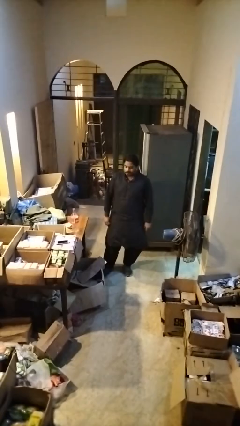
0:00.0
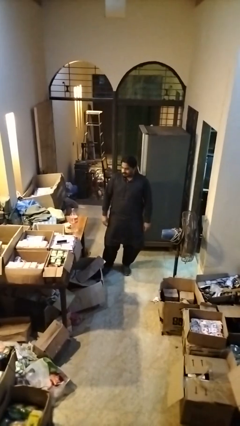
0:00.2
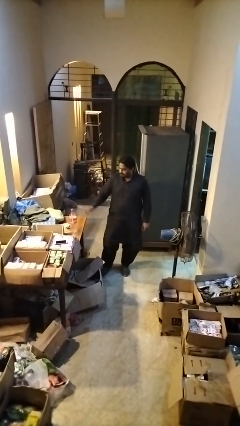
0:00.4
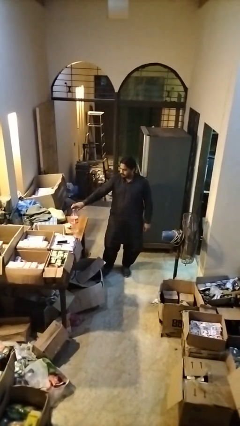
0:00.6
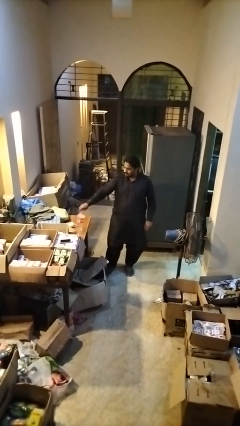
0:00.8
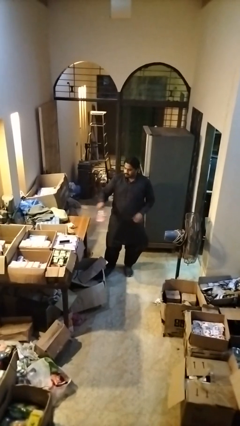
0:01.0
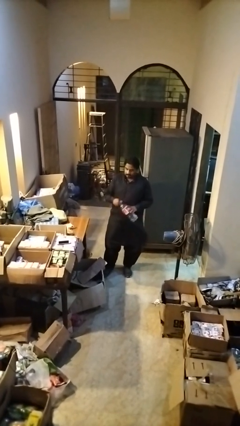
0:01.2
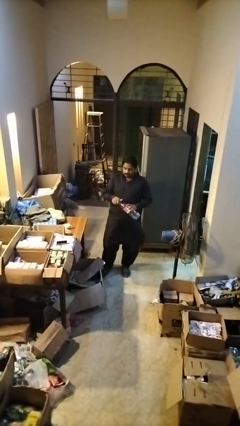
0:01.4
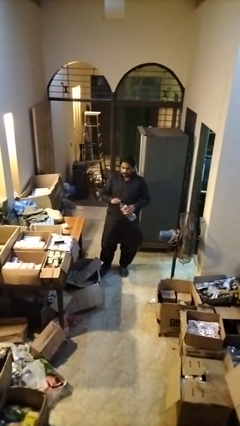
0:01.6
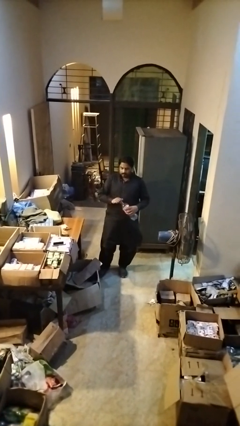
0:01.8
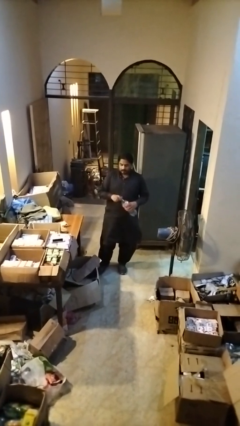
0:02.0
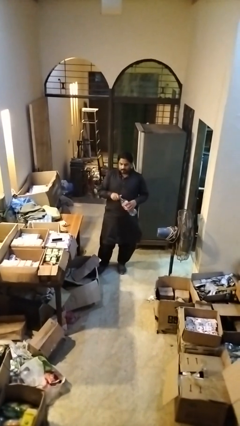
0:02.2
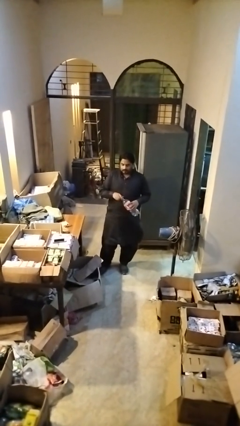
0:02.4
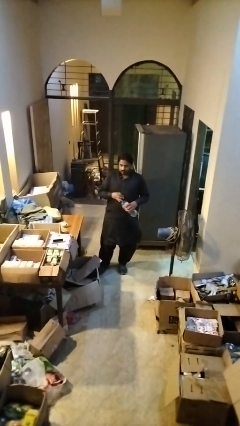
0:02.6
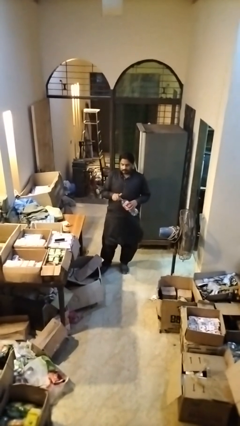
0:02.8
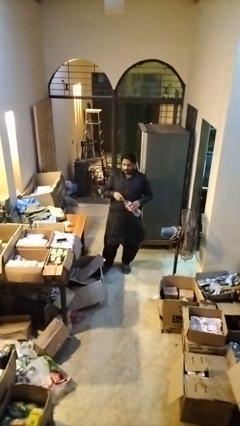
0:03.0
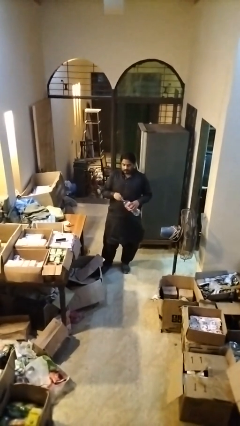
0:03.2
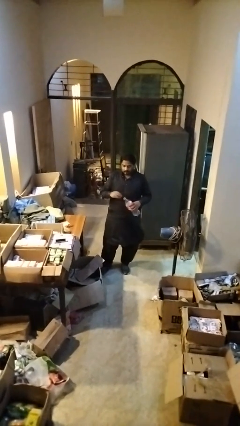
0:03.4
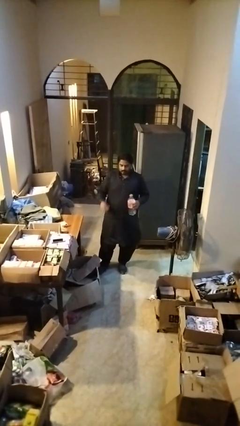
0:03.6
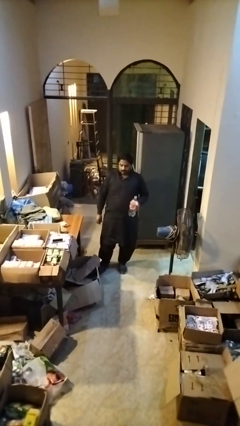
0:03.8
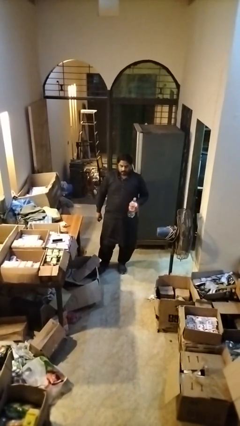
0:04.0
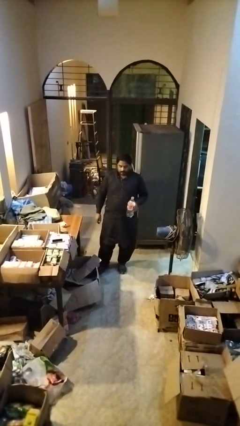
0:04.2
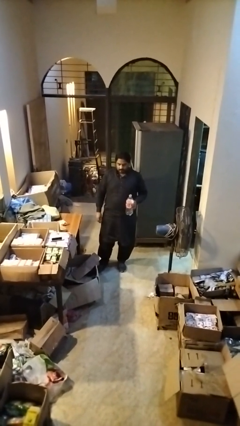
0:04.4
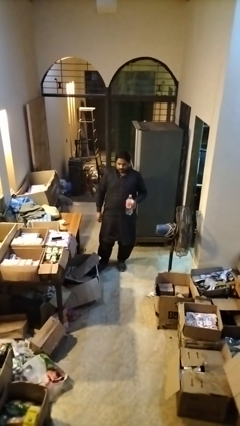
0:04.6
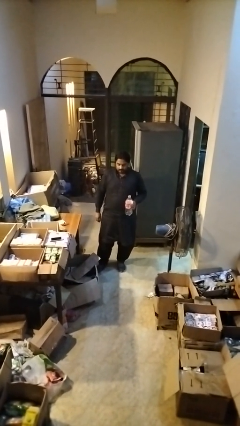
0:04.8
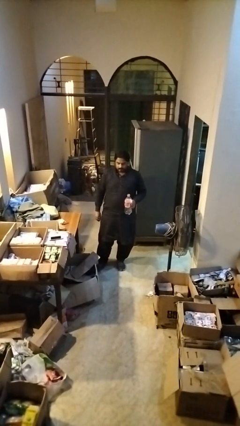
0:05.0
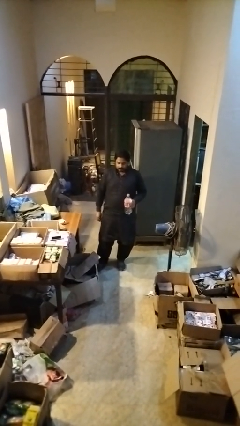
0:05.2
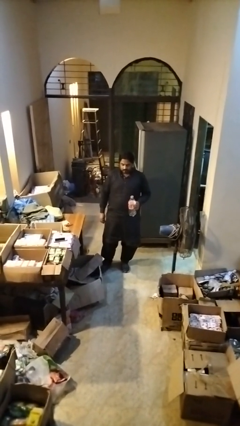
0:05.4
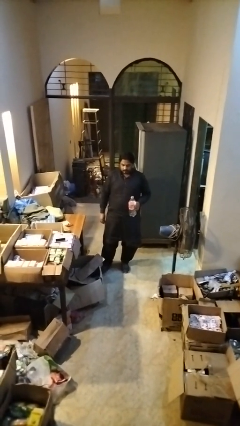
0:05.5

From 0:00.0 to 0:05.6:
person unscrews lid from bottle

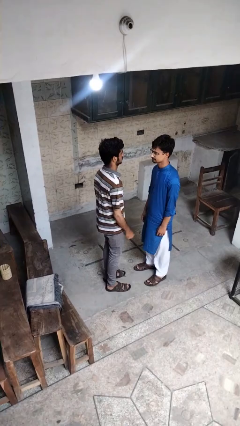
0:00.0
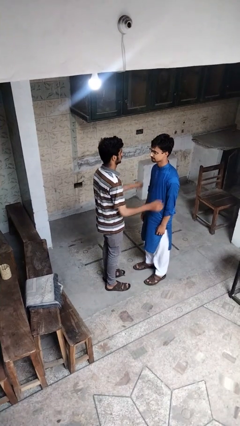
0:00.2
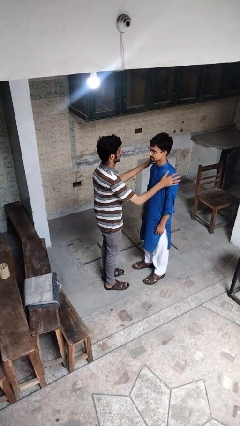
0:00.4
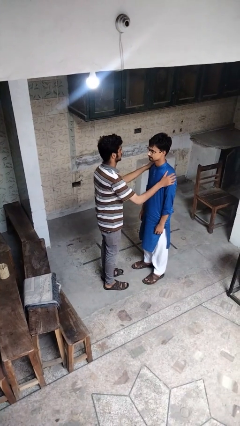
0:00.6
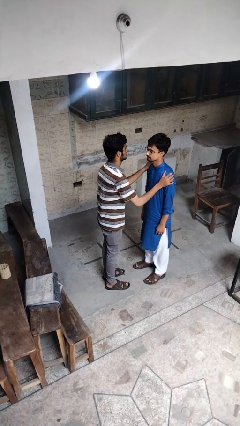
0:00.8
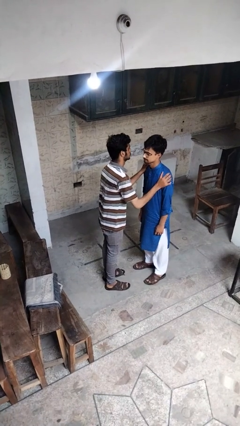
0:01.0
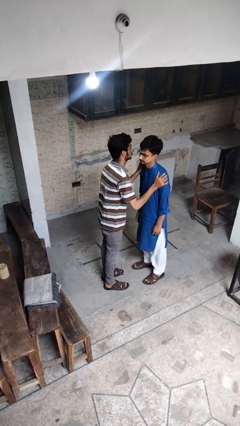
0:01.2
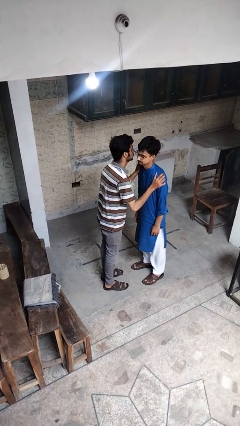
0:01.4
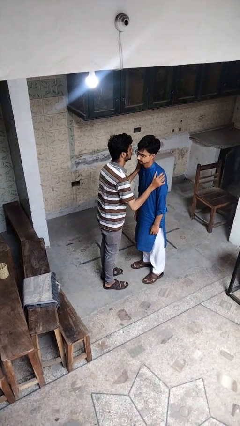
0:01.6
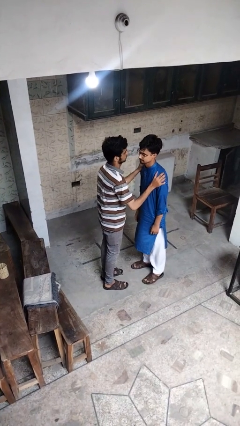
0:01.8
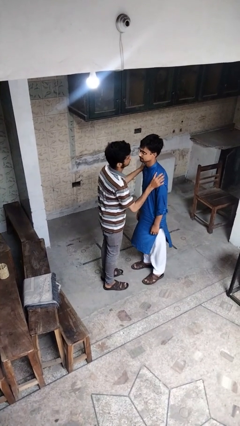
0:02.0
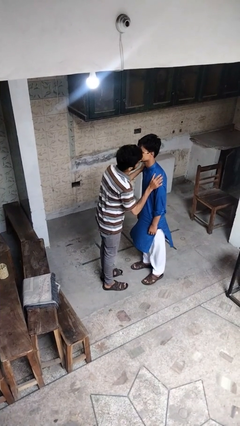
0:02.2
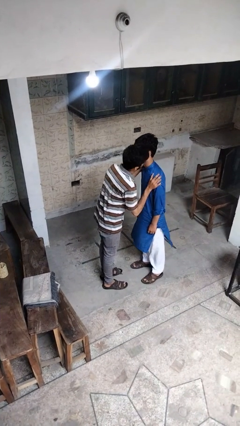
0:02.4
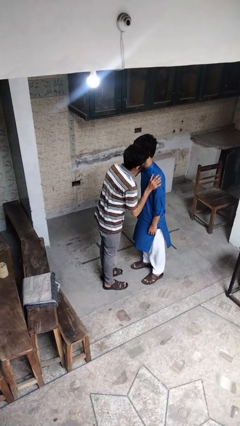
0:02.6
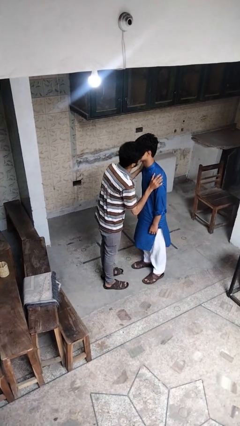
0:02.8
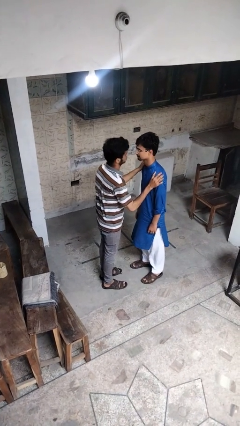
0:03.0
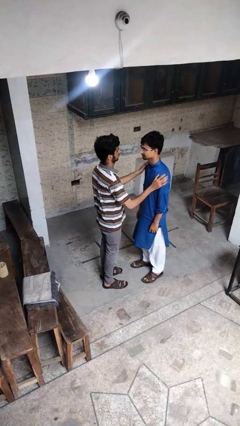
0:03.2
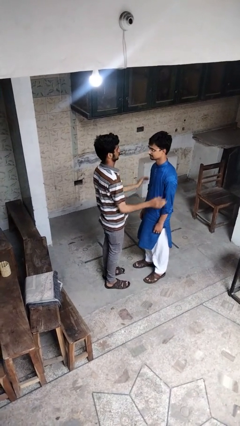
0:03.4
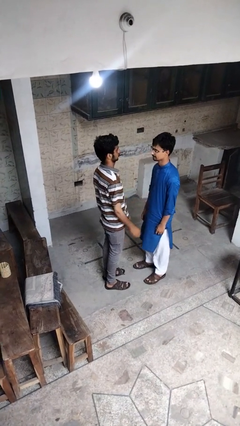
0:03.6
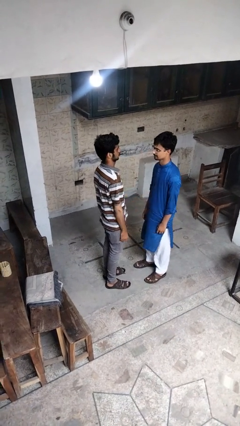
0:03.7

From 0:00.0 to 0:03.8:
person kisses cheek of person

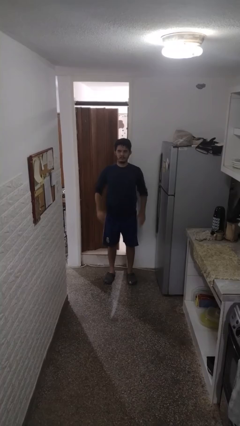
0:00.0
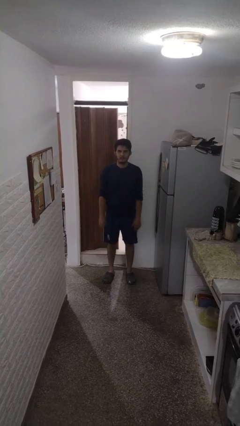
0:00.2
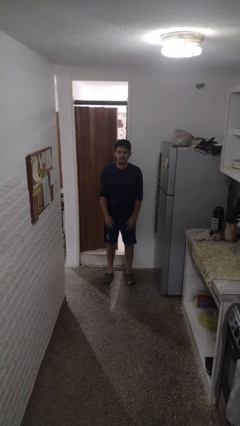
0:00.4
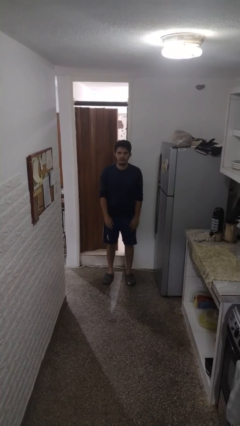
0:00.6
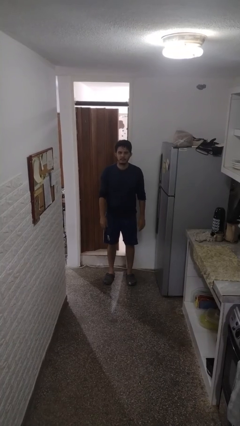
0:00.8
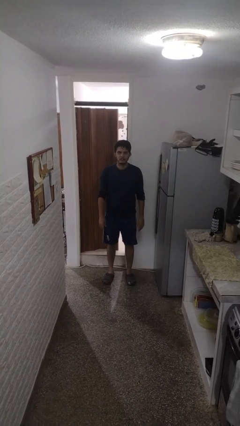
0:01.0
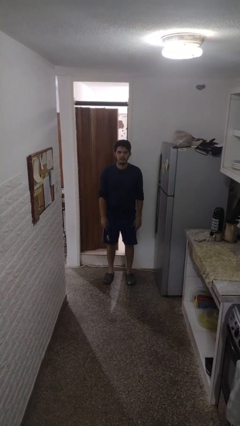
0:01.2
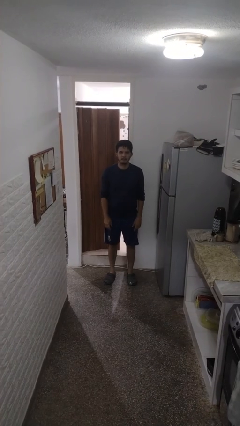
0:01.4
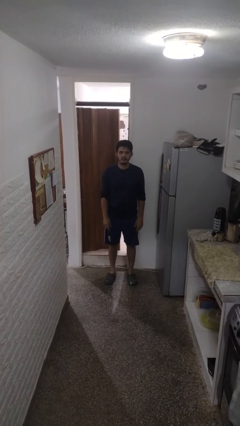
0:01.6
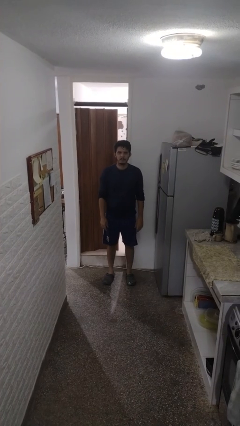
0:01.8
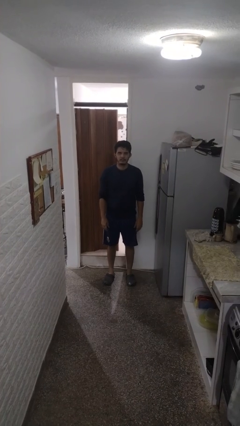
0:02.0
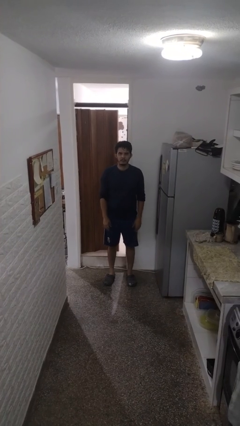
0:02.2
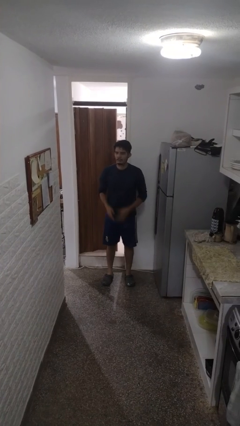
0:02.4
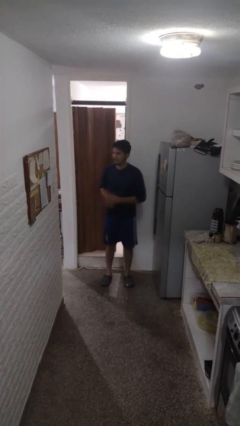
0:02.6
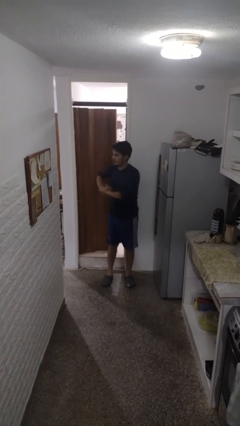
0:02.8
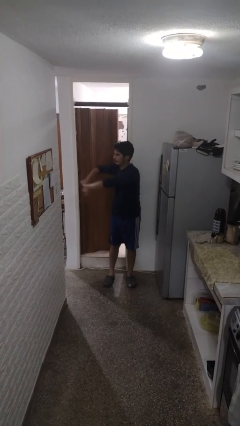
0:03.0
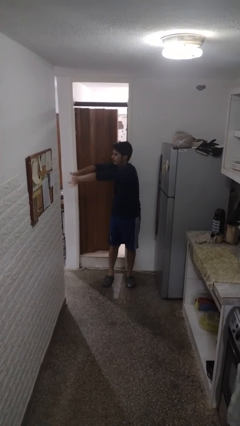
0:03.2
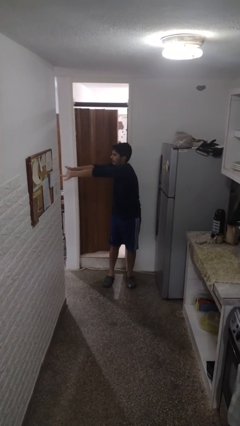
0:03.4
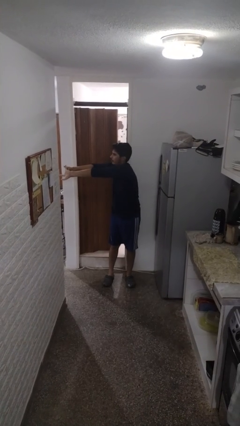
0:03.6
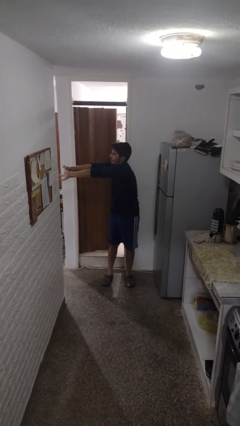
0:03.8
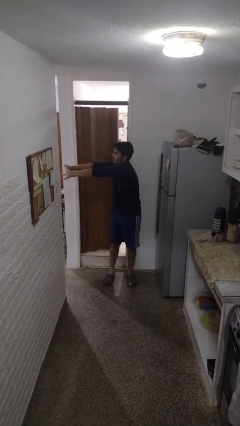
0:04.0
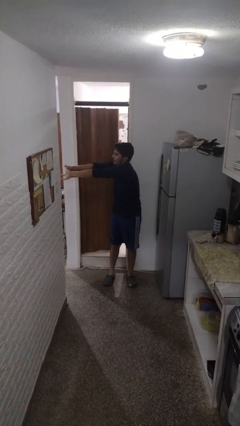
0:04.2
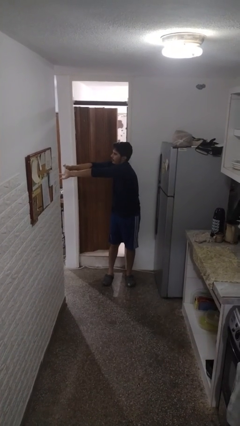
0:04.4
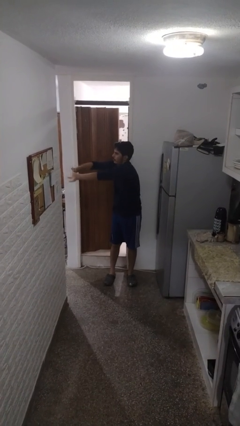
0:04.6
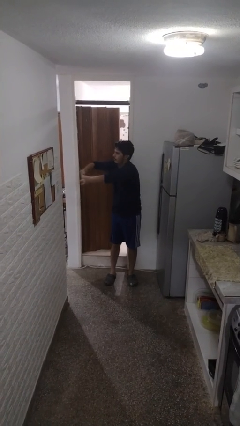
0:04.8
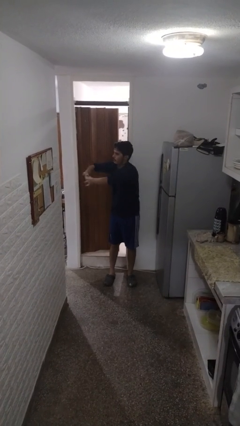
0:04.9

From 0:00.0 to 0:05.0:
person stretches arms to side

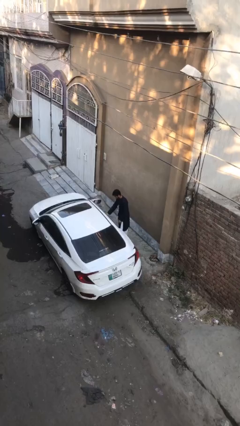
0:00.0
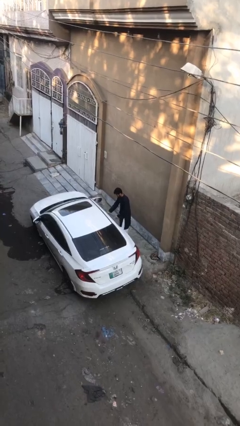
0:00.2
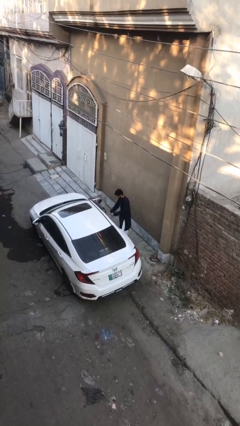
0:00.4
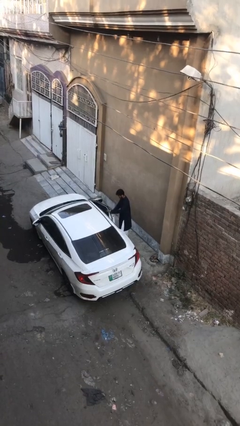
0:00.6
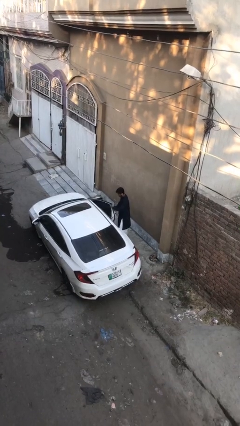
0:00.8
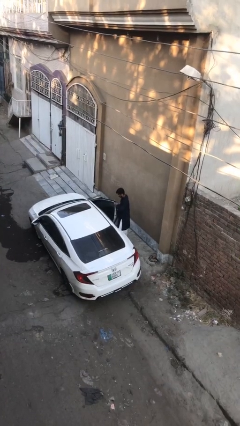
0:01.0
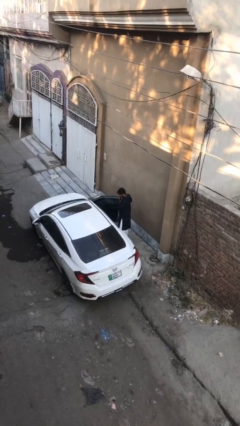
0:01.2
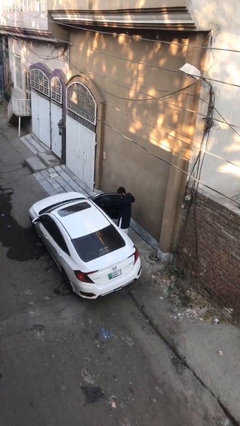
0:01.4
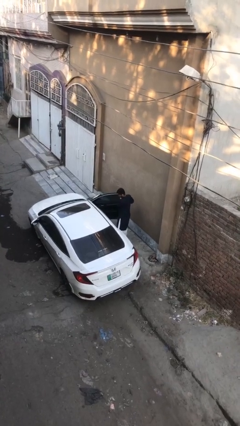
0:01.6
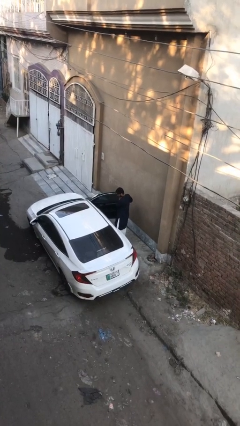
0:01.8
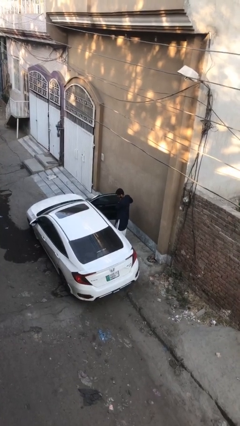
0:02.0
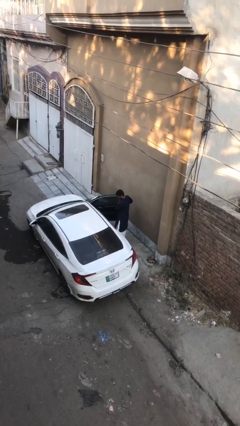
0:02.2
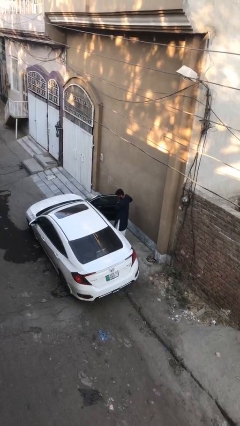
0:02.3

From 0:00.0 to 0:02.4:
person opens car door

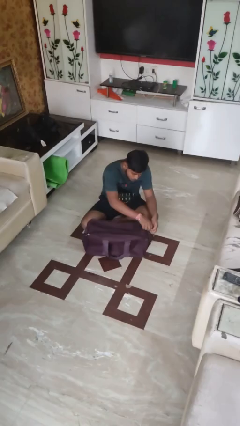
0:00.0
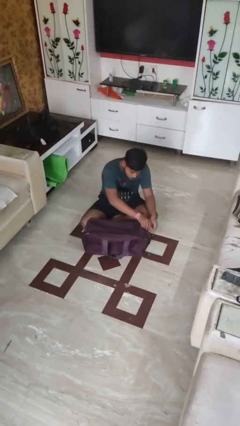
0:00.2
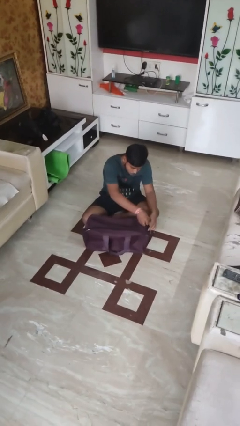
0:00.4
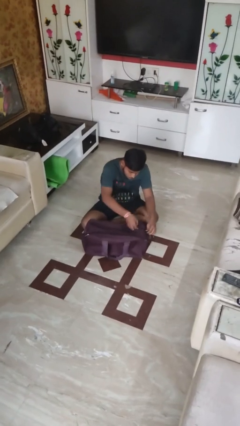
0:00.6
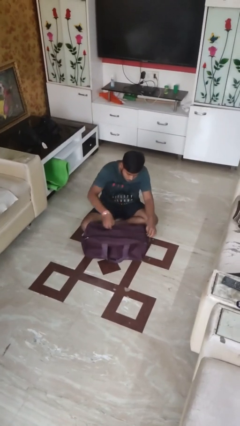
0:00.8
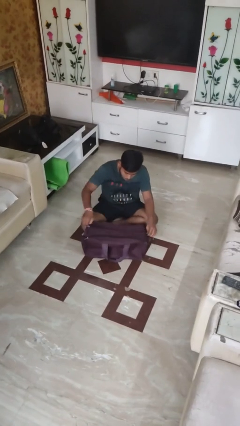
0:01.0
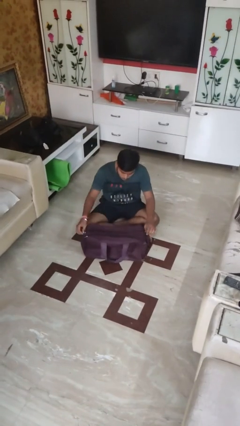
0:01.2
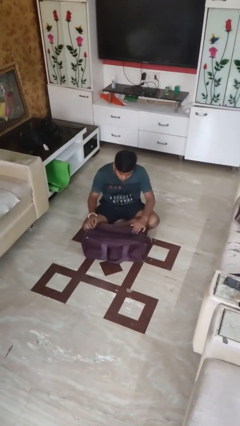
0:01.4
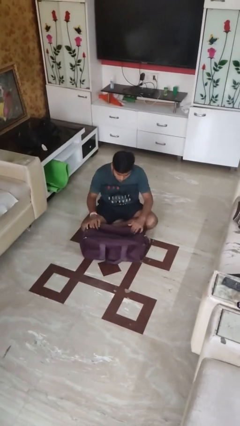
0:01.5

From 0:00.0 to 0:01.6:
person opens suitcase
